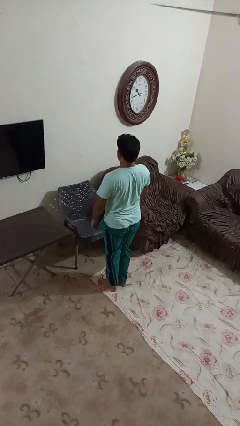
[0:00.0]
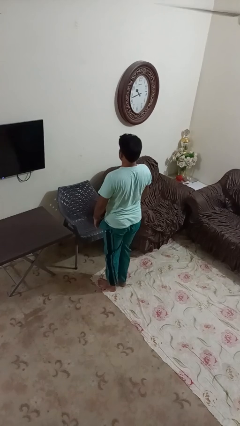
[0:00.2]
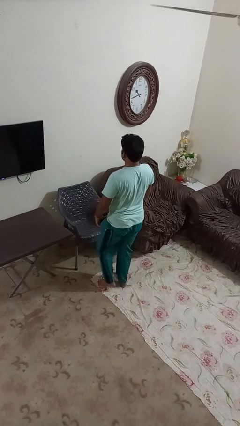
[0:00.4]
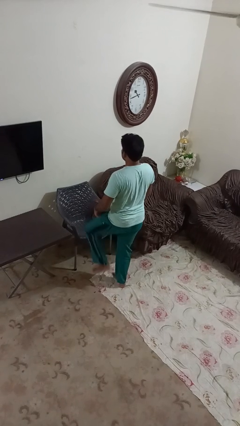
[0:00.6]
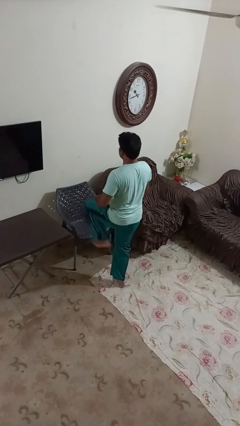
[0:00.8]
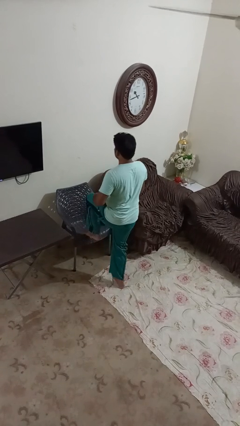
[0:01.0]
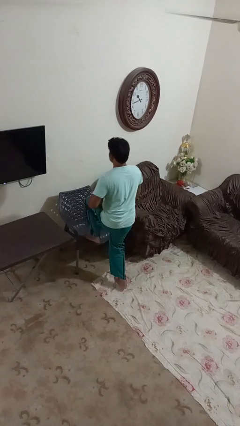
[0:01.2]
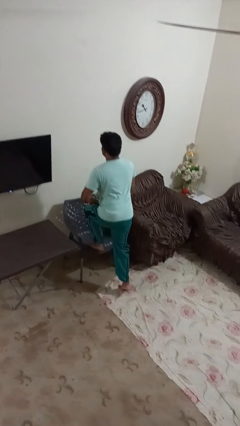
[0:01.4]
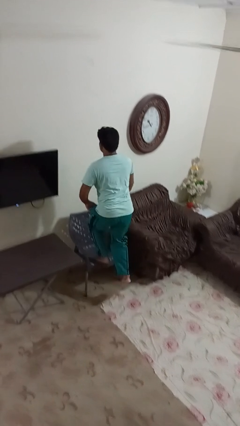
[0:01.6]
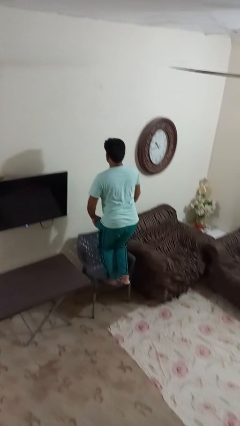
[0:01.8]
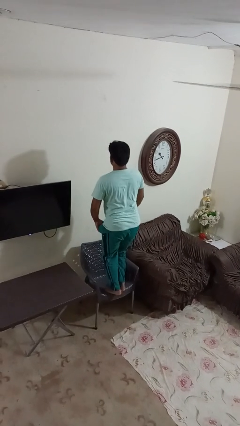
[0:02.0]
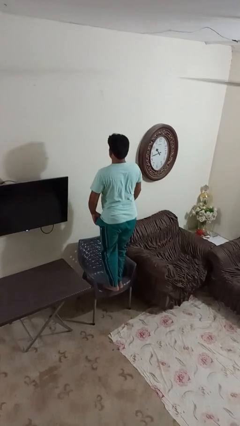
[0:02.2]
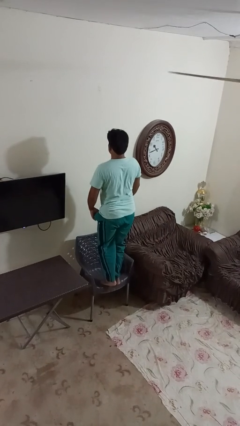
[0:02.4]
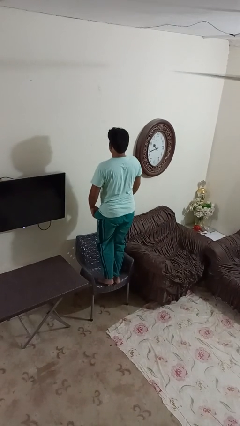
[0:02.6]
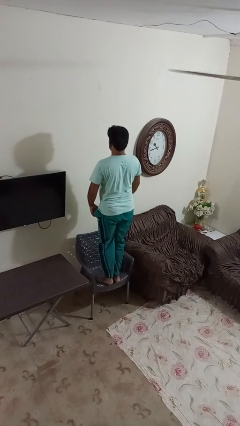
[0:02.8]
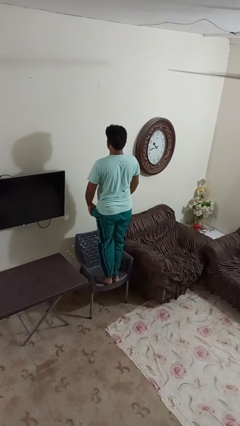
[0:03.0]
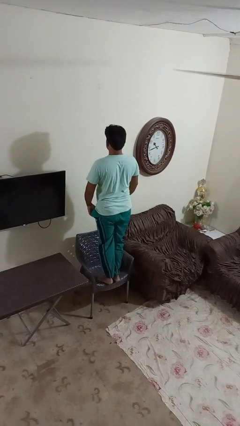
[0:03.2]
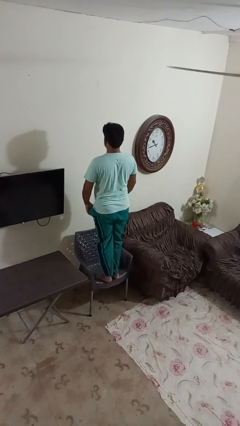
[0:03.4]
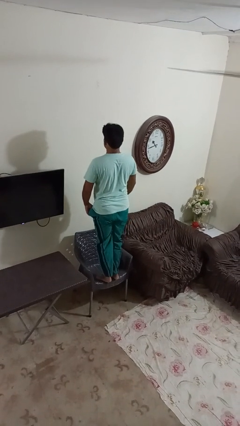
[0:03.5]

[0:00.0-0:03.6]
person climbs on chair

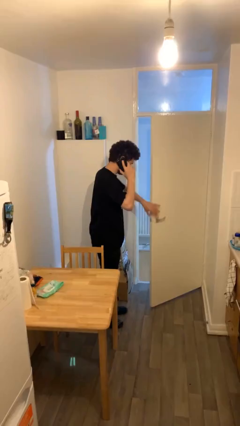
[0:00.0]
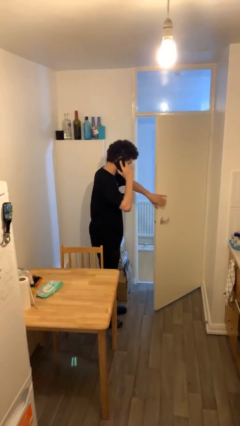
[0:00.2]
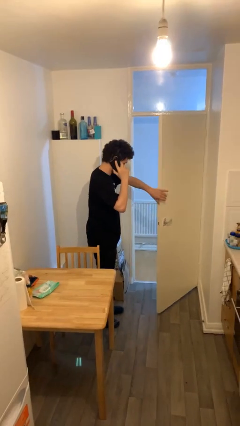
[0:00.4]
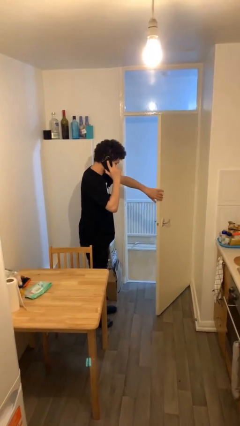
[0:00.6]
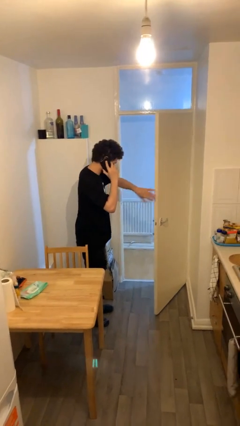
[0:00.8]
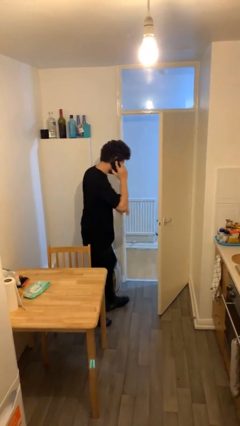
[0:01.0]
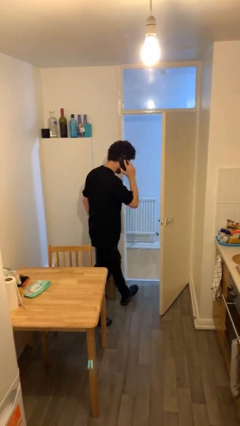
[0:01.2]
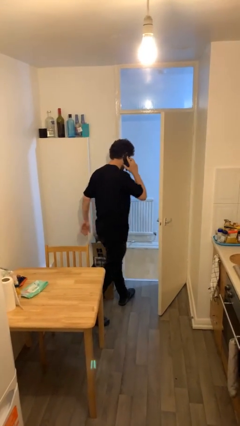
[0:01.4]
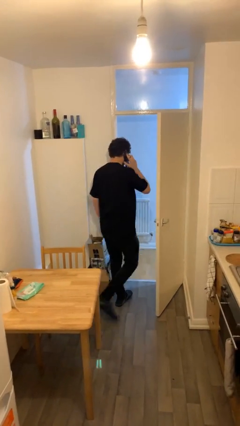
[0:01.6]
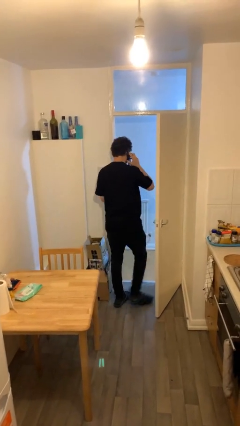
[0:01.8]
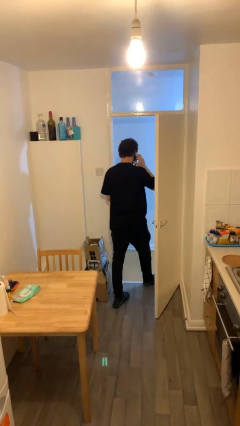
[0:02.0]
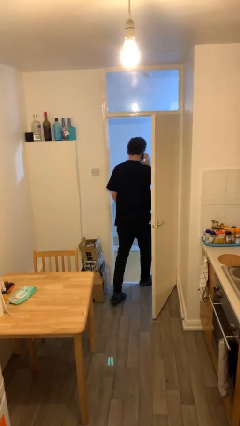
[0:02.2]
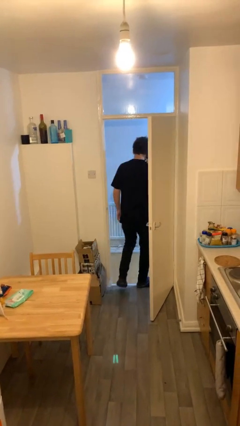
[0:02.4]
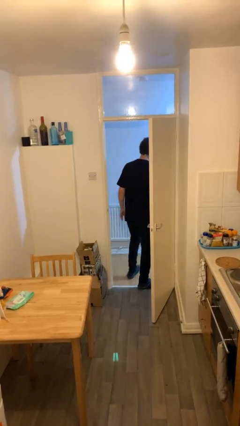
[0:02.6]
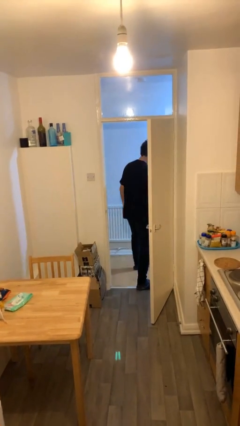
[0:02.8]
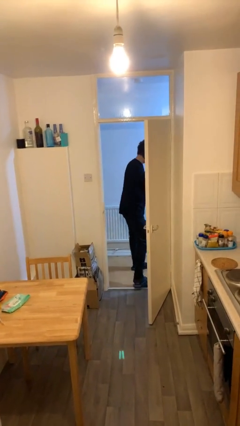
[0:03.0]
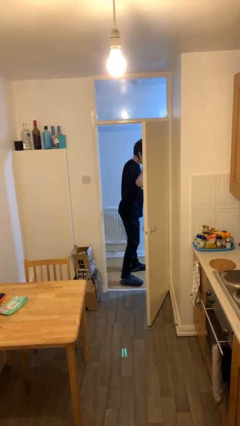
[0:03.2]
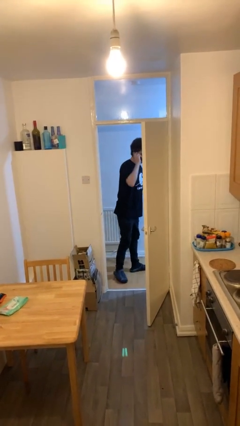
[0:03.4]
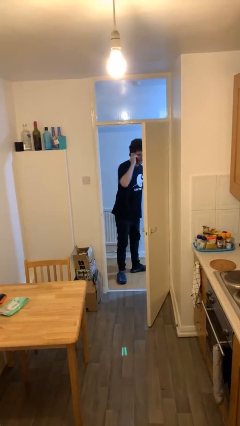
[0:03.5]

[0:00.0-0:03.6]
person exits scene through structure

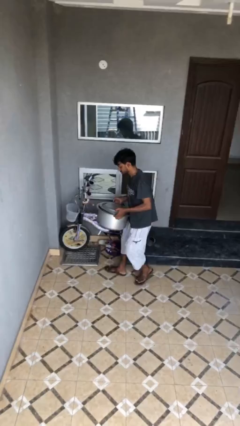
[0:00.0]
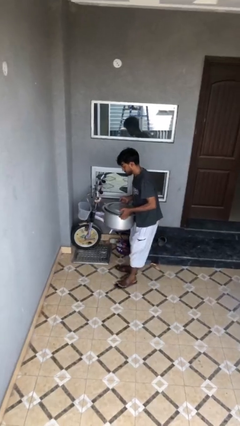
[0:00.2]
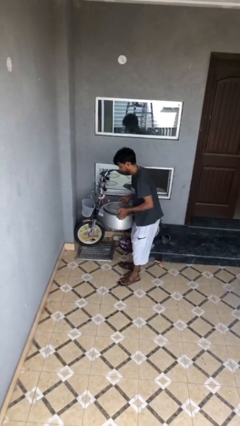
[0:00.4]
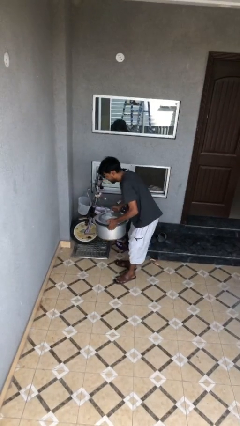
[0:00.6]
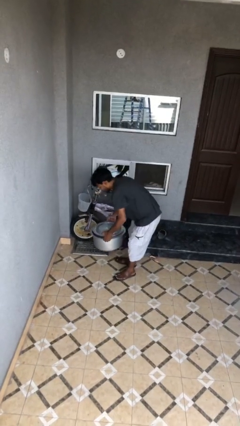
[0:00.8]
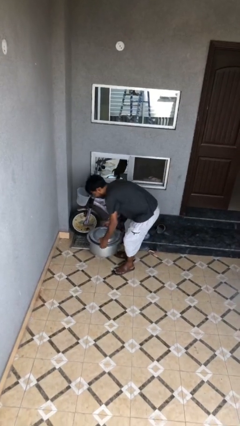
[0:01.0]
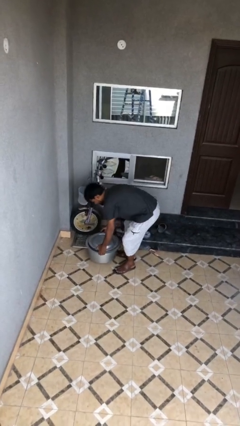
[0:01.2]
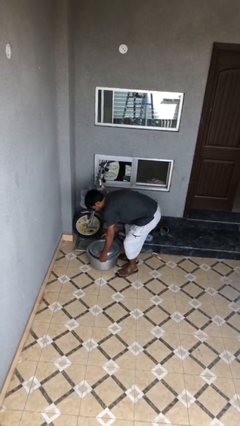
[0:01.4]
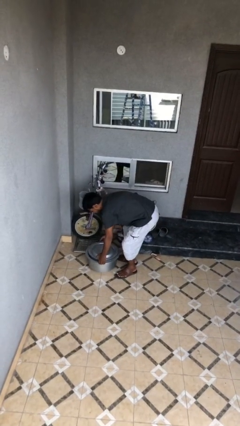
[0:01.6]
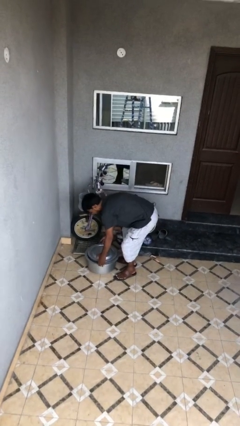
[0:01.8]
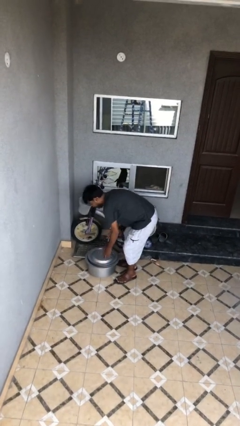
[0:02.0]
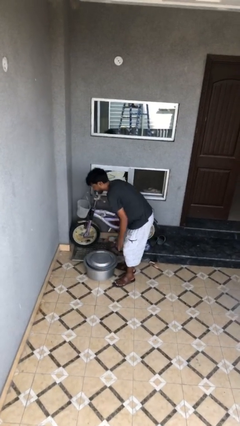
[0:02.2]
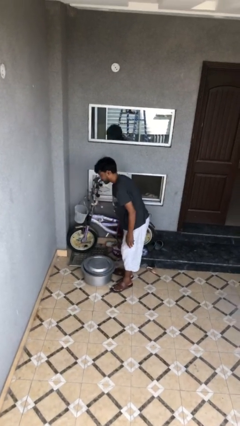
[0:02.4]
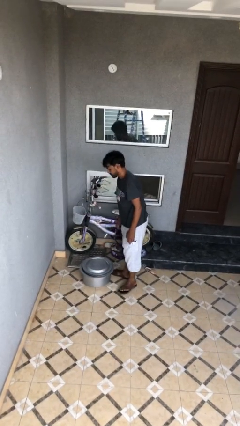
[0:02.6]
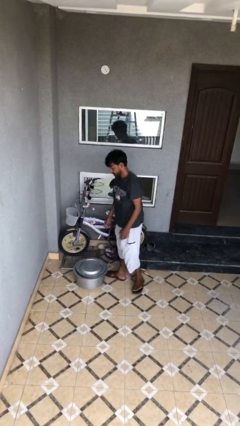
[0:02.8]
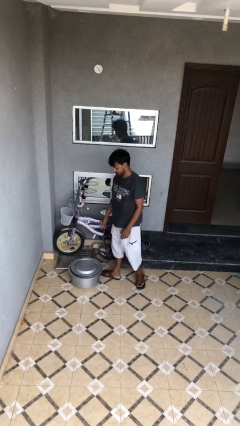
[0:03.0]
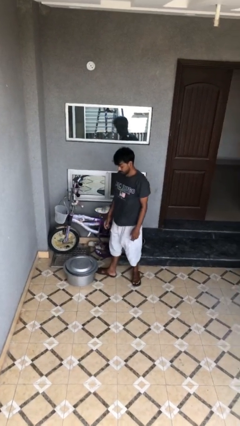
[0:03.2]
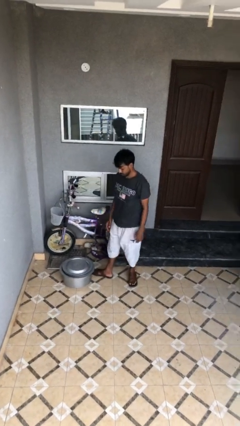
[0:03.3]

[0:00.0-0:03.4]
person puts down object on floor

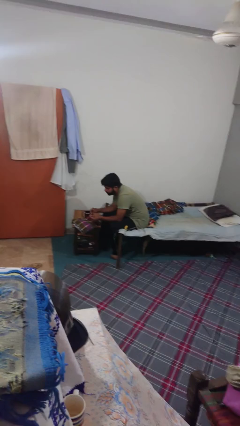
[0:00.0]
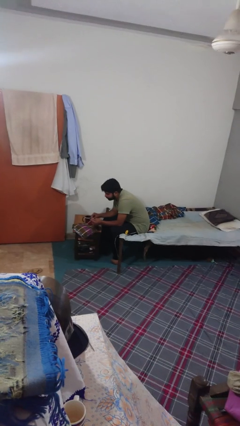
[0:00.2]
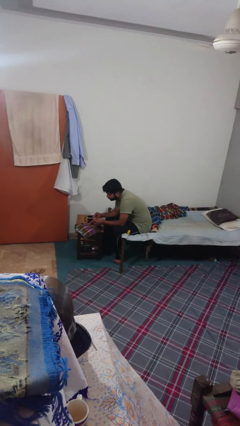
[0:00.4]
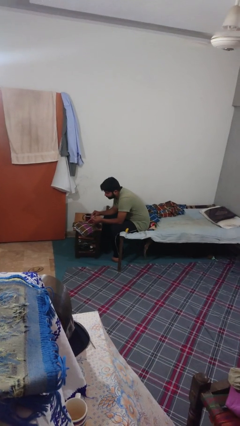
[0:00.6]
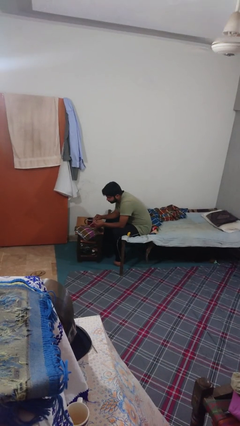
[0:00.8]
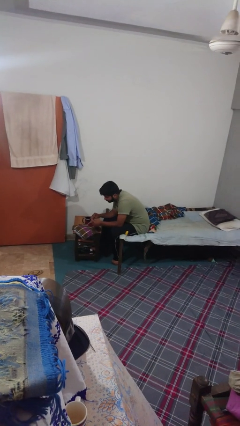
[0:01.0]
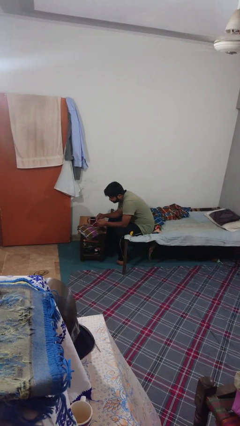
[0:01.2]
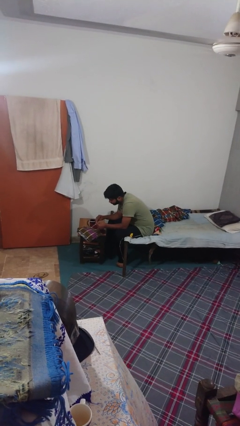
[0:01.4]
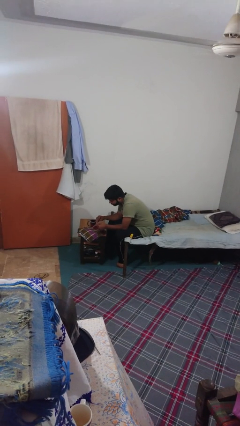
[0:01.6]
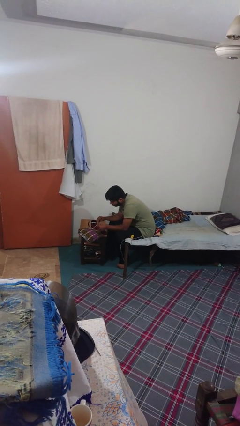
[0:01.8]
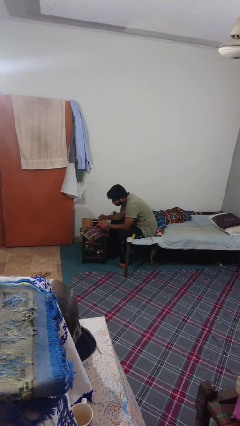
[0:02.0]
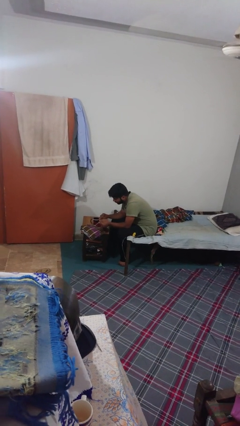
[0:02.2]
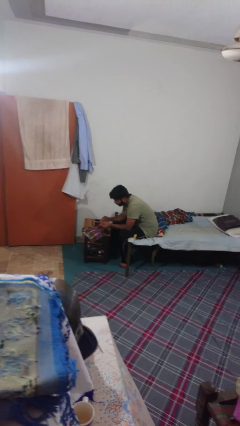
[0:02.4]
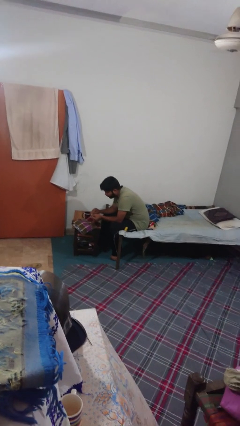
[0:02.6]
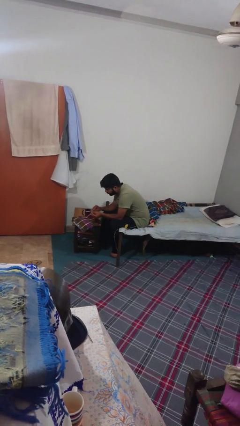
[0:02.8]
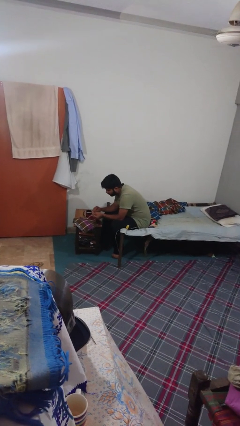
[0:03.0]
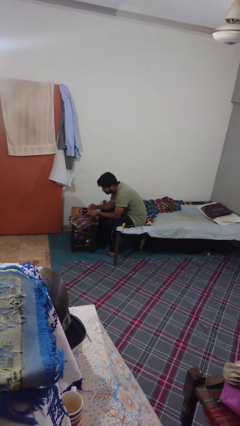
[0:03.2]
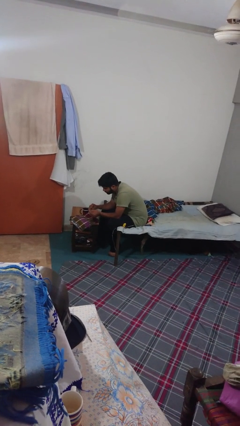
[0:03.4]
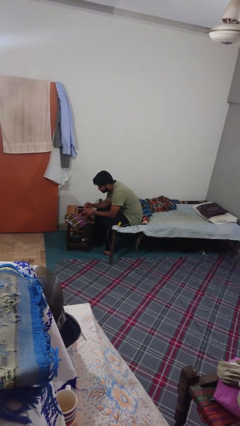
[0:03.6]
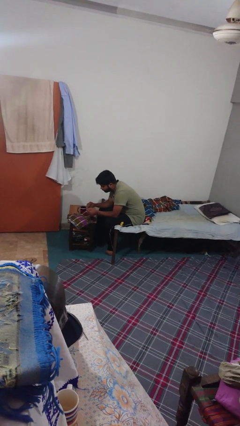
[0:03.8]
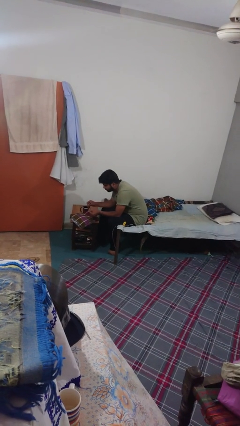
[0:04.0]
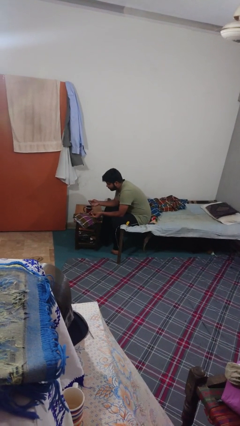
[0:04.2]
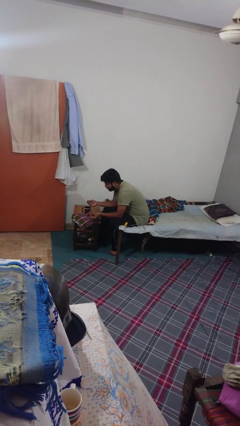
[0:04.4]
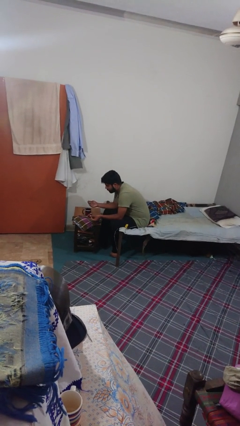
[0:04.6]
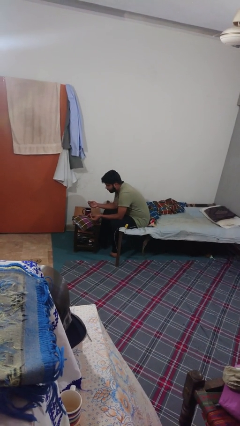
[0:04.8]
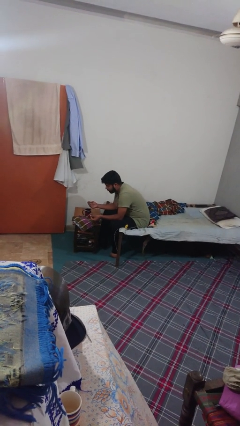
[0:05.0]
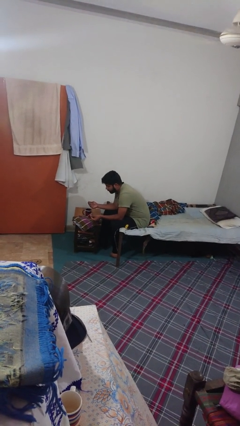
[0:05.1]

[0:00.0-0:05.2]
person files fingernails

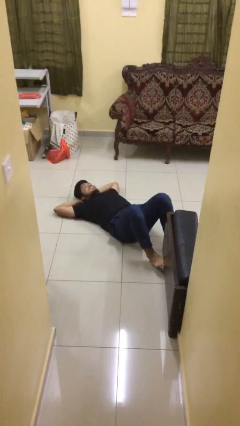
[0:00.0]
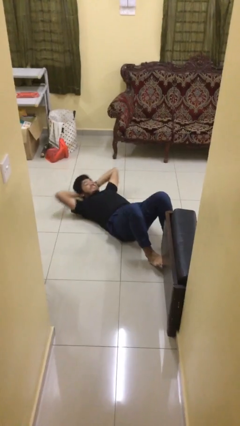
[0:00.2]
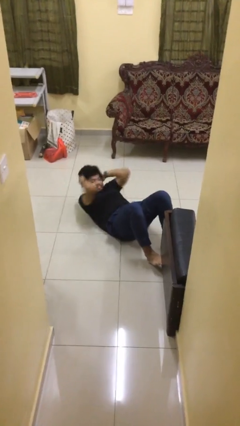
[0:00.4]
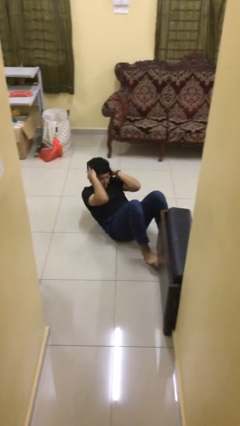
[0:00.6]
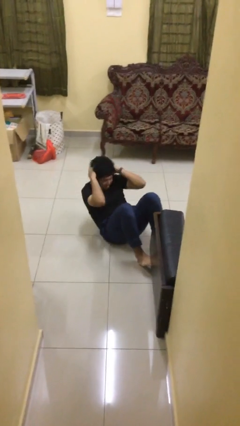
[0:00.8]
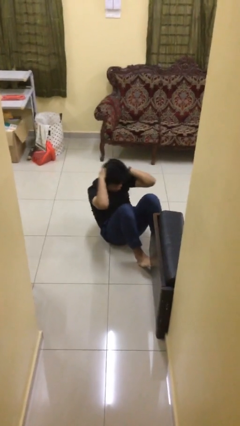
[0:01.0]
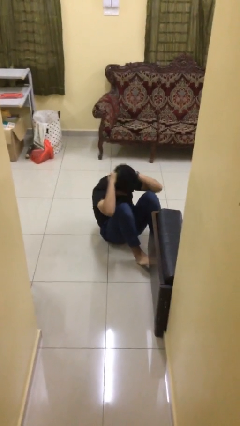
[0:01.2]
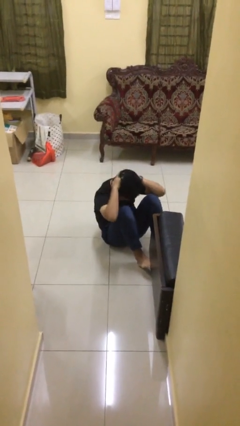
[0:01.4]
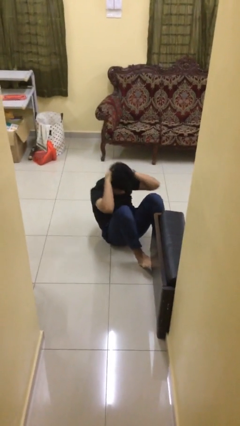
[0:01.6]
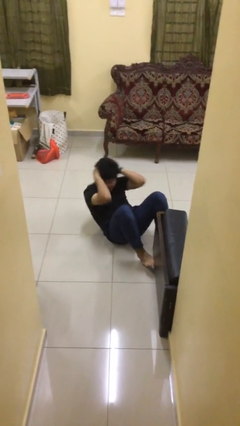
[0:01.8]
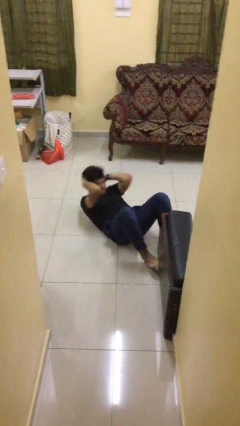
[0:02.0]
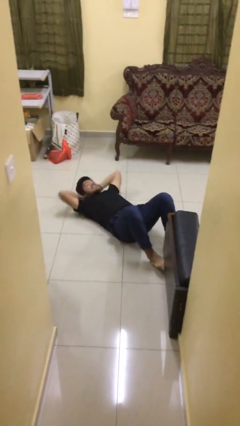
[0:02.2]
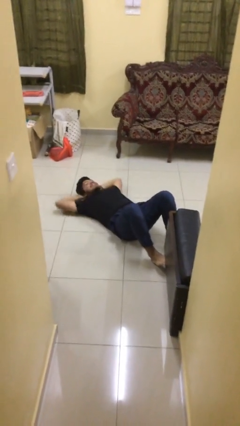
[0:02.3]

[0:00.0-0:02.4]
person exercises with situp
